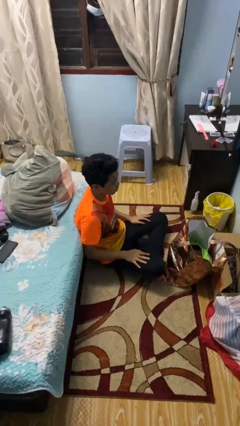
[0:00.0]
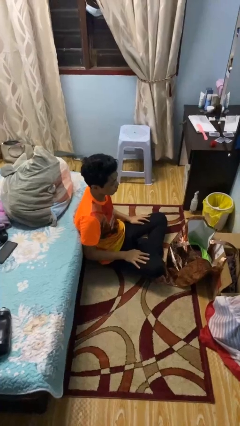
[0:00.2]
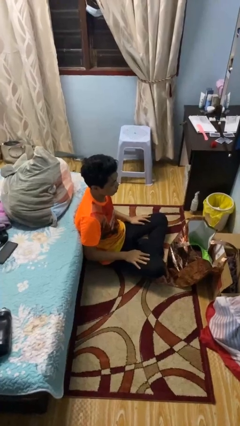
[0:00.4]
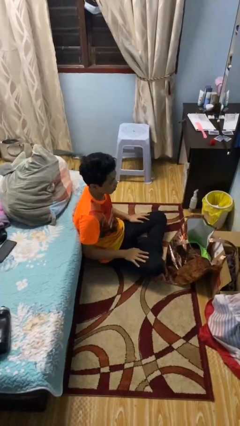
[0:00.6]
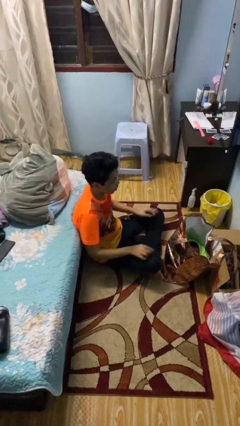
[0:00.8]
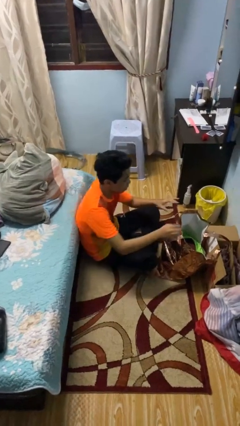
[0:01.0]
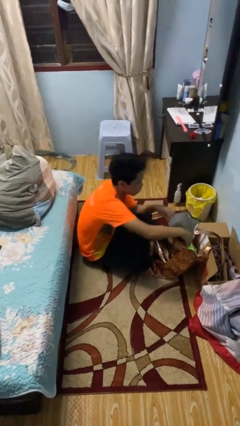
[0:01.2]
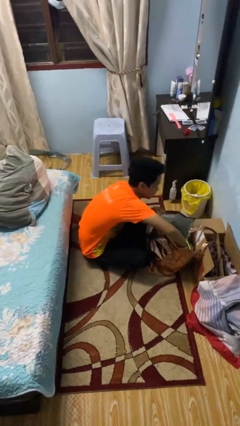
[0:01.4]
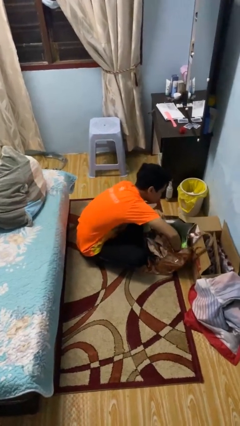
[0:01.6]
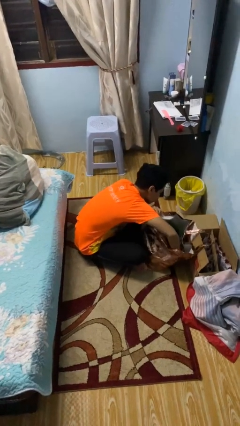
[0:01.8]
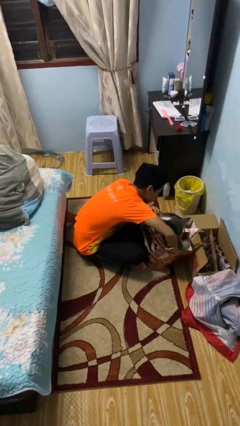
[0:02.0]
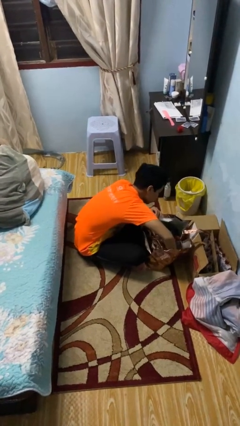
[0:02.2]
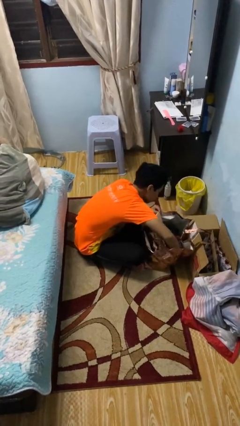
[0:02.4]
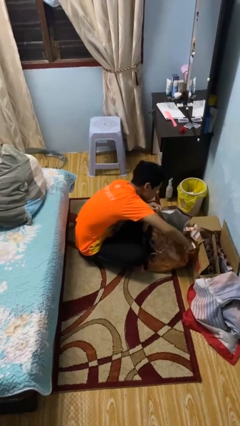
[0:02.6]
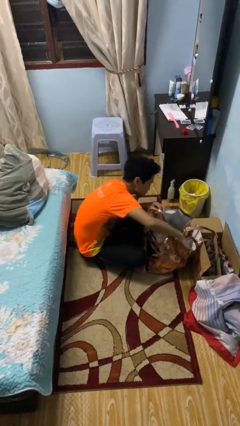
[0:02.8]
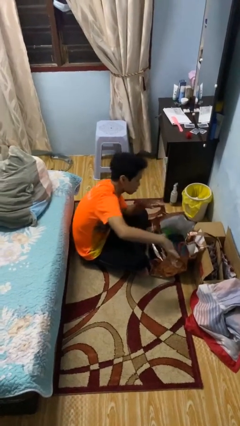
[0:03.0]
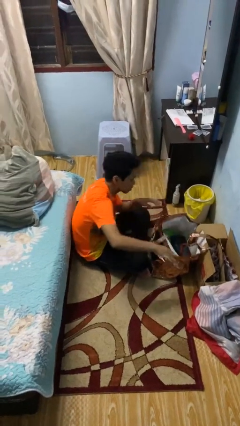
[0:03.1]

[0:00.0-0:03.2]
person searches in bag

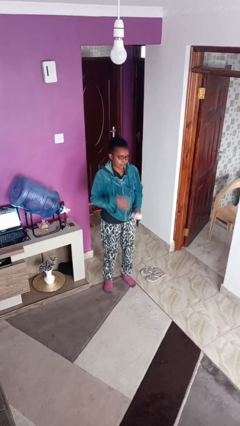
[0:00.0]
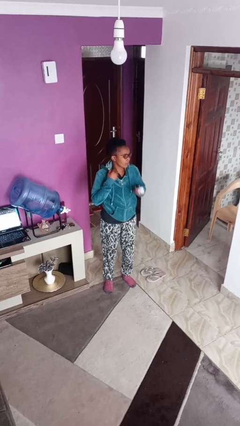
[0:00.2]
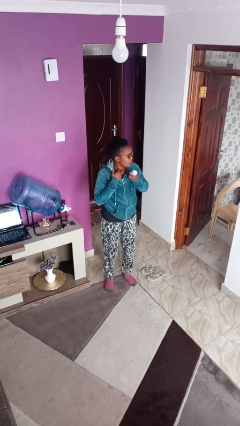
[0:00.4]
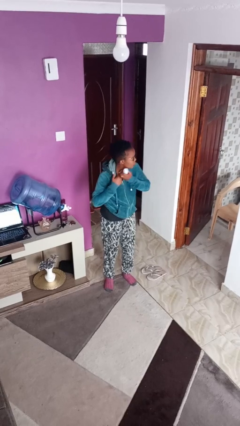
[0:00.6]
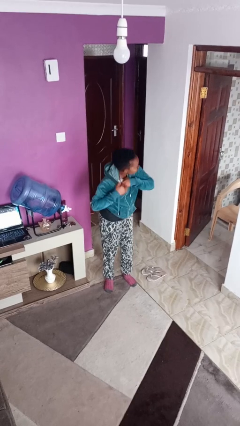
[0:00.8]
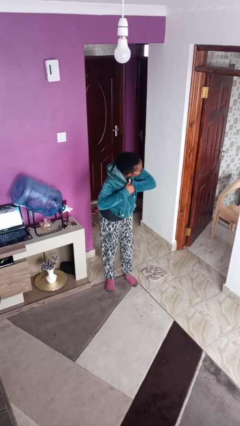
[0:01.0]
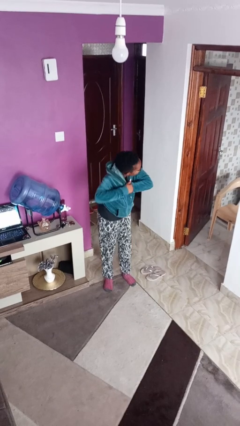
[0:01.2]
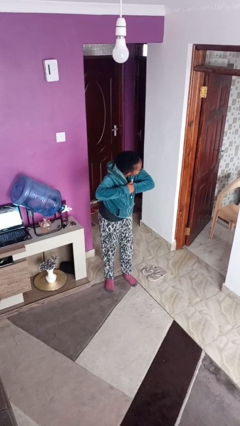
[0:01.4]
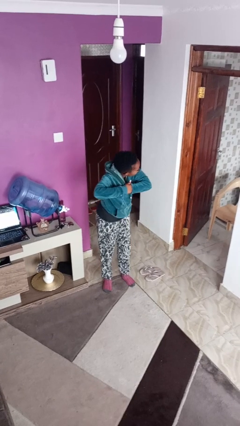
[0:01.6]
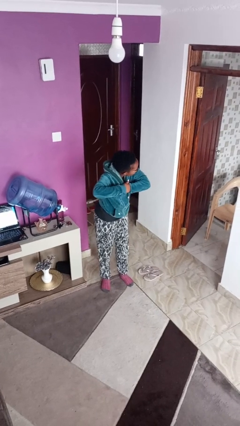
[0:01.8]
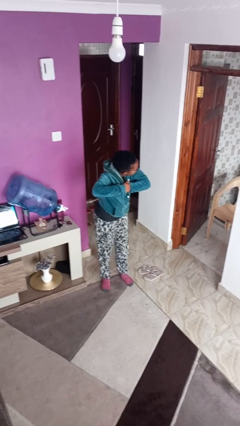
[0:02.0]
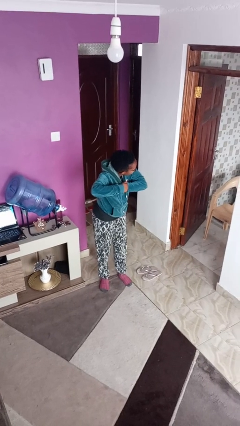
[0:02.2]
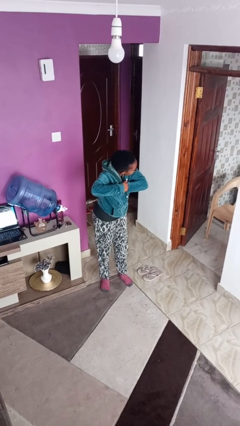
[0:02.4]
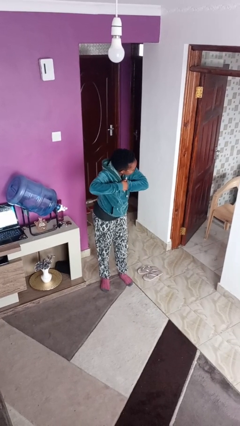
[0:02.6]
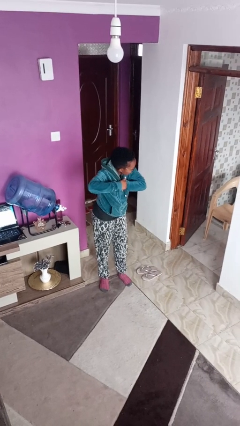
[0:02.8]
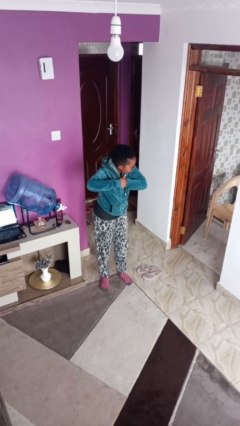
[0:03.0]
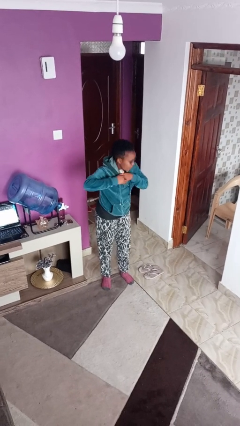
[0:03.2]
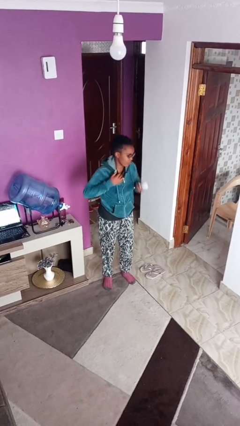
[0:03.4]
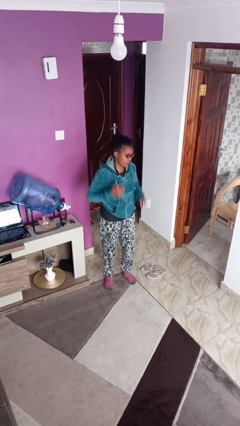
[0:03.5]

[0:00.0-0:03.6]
person applies deodorant

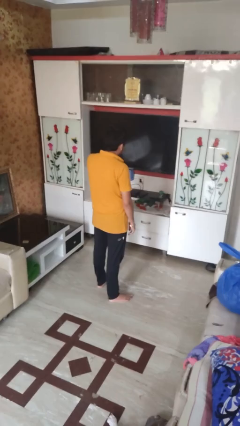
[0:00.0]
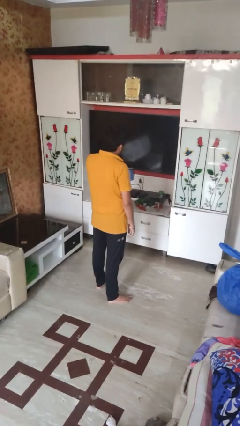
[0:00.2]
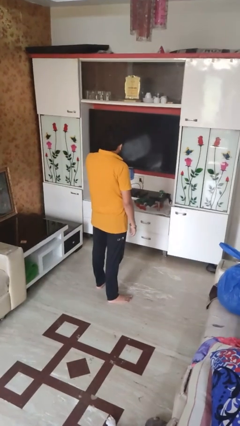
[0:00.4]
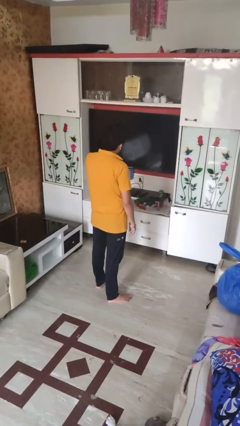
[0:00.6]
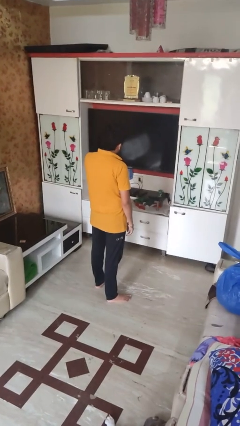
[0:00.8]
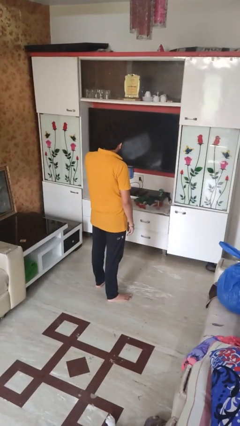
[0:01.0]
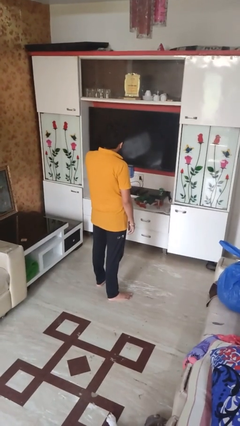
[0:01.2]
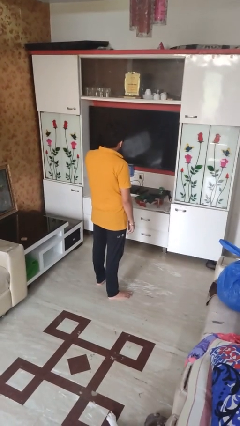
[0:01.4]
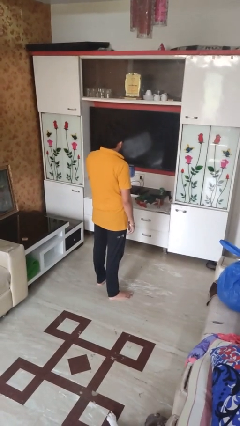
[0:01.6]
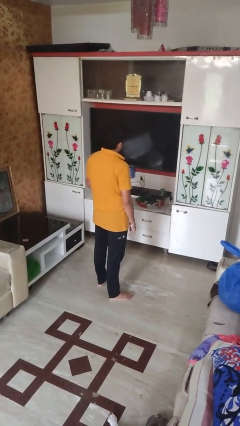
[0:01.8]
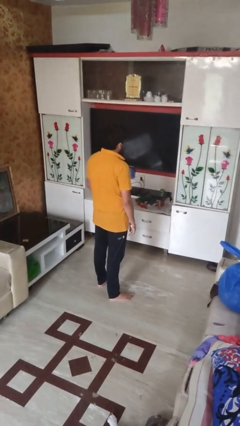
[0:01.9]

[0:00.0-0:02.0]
person licks fingers

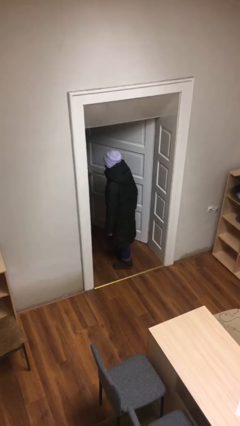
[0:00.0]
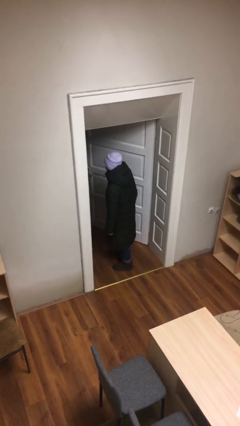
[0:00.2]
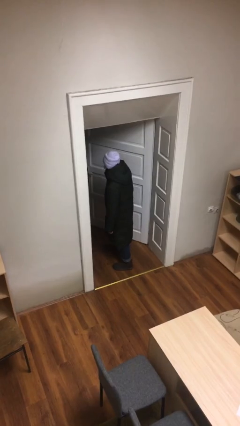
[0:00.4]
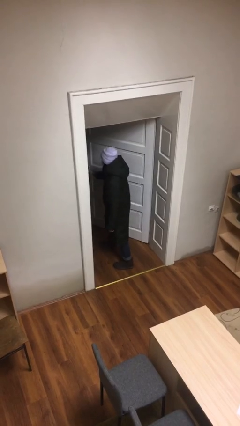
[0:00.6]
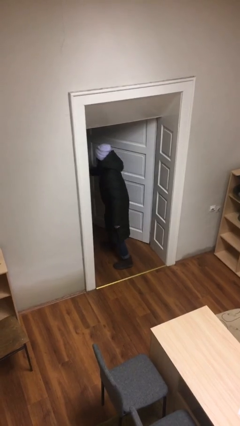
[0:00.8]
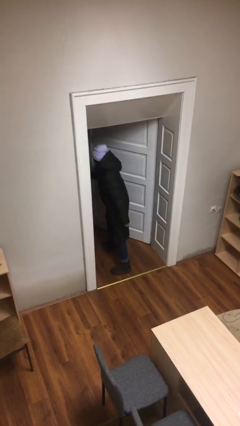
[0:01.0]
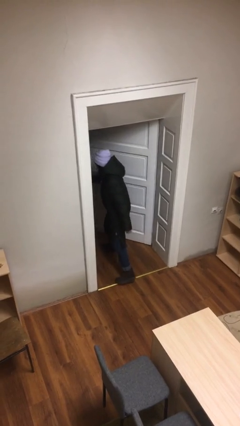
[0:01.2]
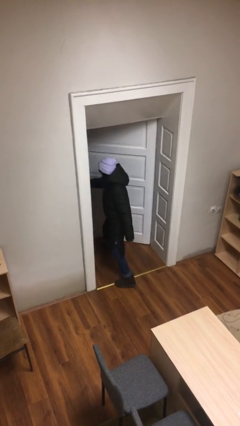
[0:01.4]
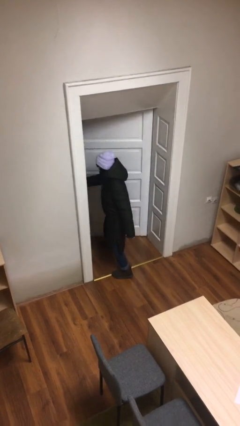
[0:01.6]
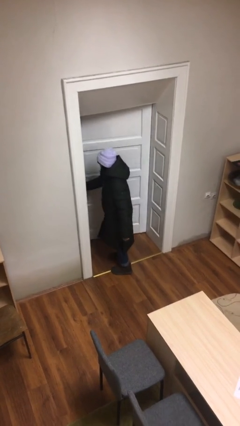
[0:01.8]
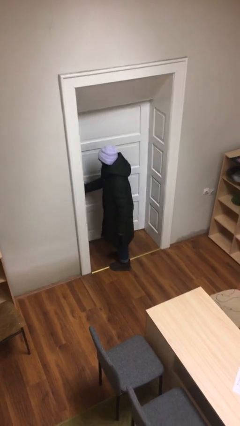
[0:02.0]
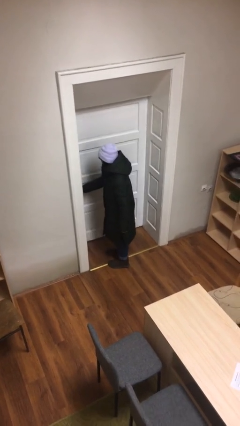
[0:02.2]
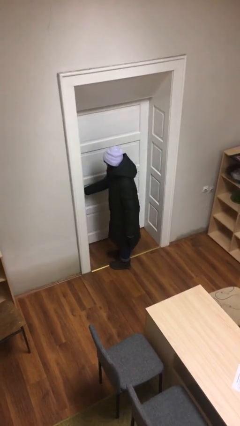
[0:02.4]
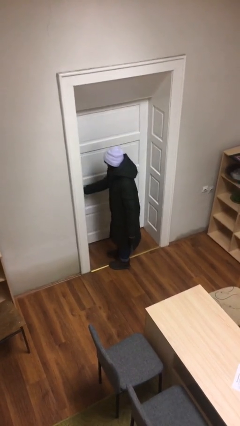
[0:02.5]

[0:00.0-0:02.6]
person closes facility door

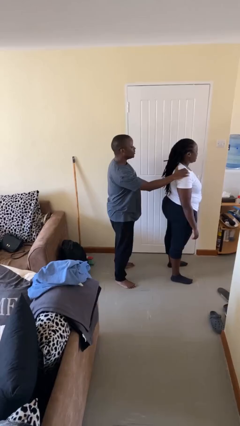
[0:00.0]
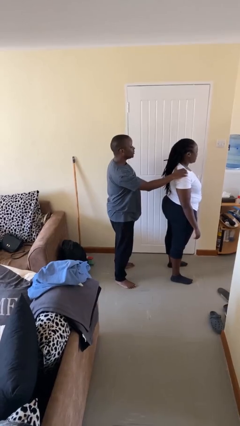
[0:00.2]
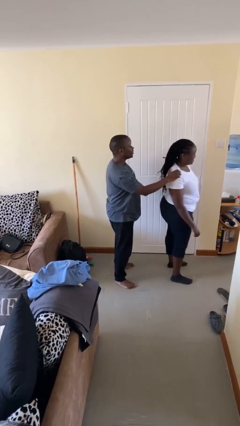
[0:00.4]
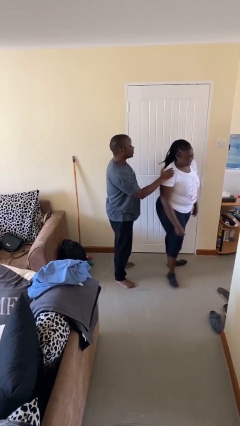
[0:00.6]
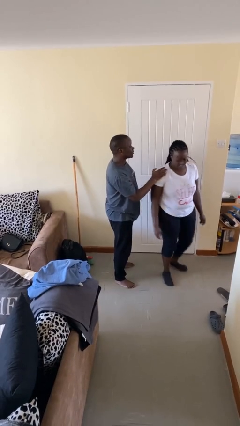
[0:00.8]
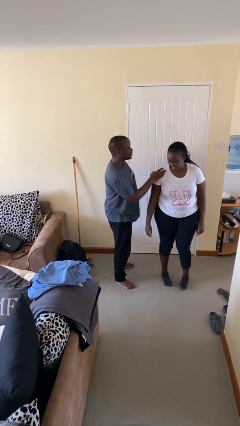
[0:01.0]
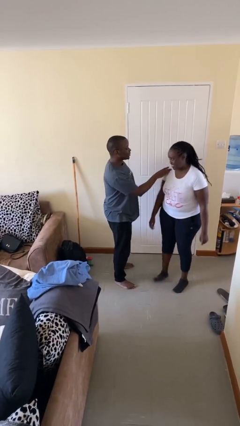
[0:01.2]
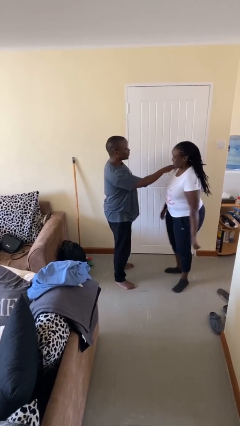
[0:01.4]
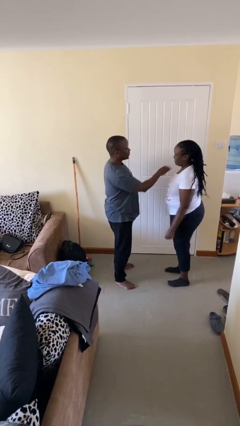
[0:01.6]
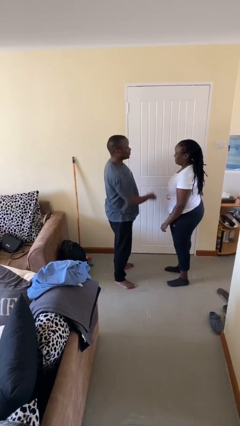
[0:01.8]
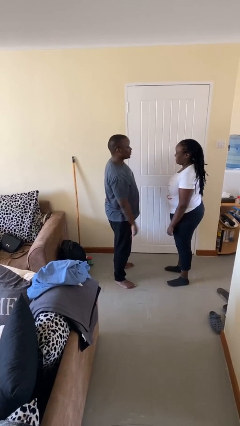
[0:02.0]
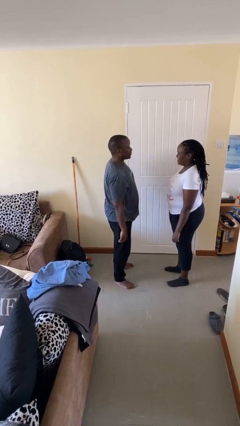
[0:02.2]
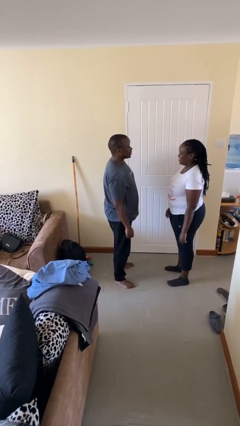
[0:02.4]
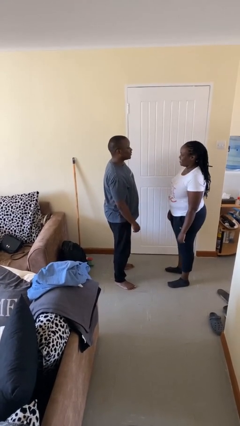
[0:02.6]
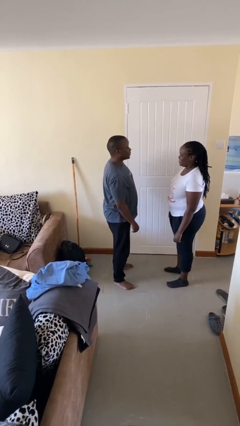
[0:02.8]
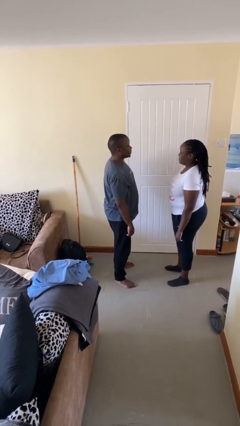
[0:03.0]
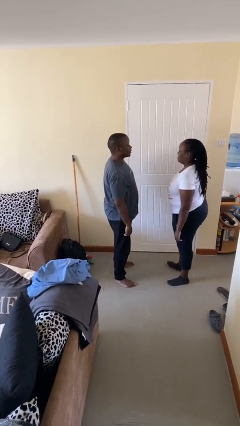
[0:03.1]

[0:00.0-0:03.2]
person spins person around

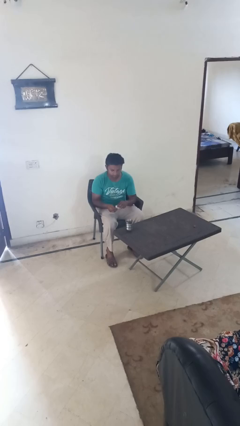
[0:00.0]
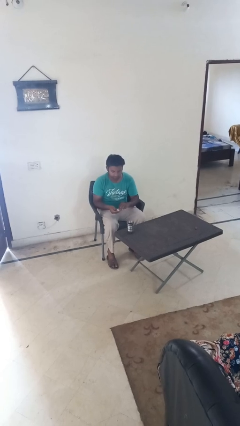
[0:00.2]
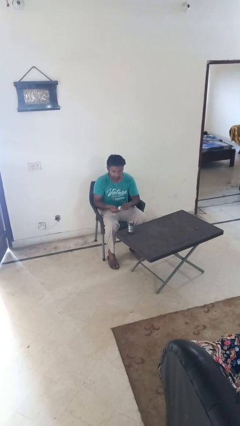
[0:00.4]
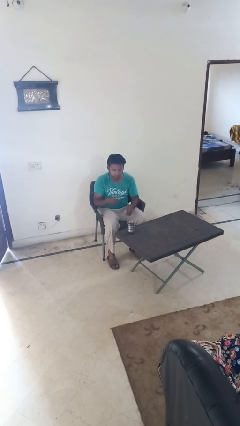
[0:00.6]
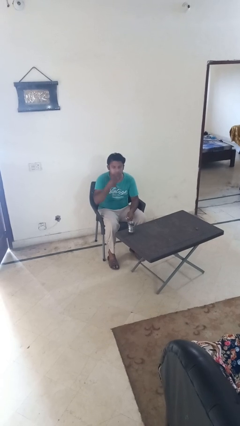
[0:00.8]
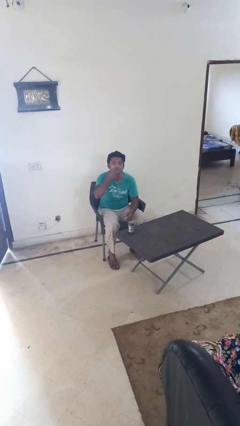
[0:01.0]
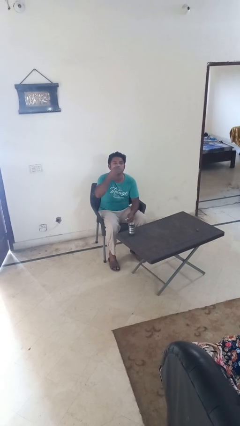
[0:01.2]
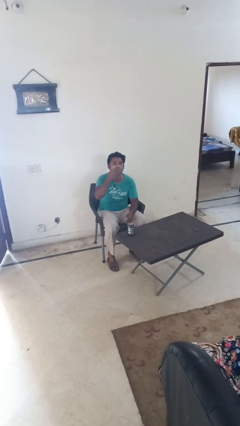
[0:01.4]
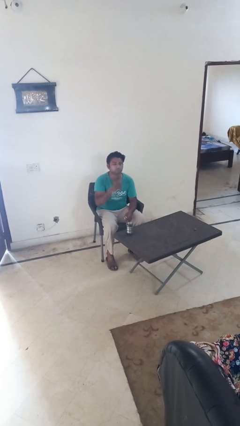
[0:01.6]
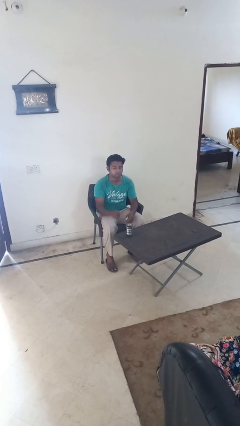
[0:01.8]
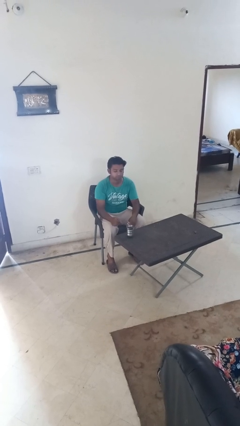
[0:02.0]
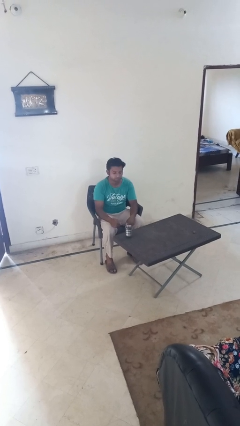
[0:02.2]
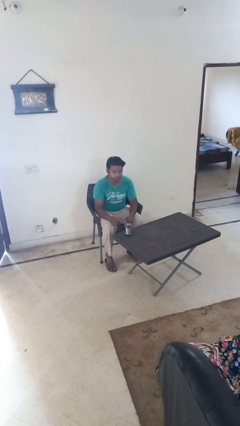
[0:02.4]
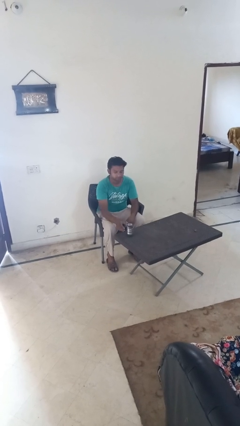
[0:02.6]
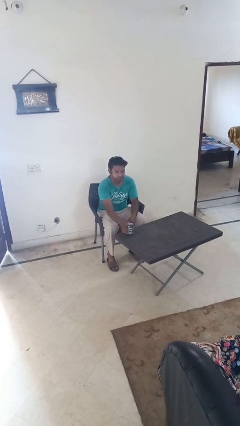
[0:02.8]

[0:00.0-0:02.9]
person takes medicine pills

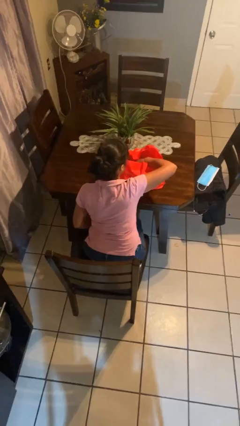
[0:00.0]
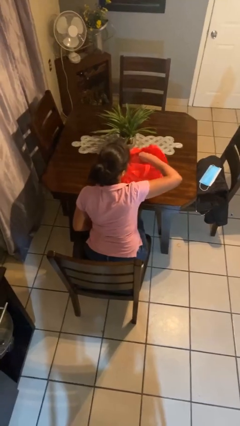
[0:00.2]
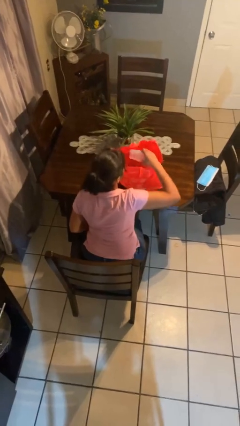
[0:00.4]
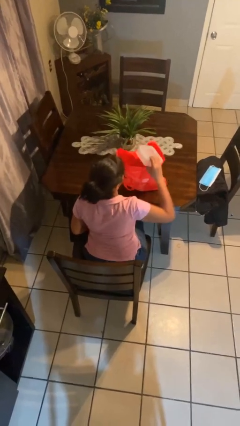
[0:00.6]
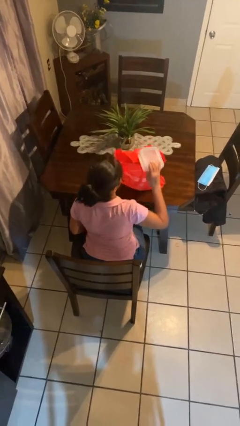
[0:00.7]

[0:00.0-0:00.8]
person takes object from bag
